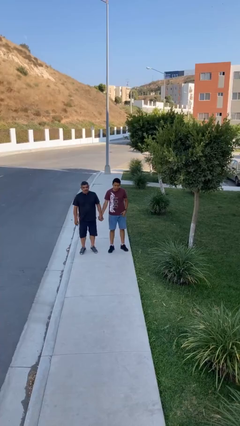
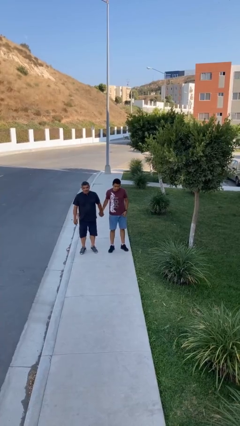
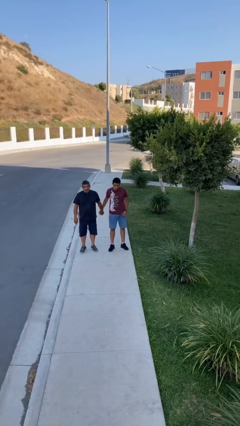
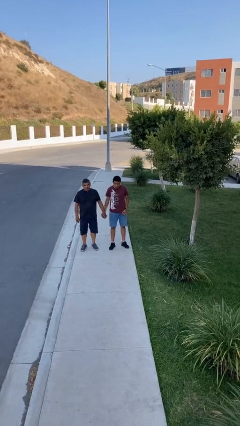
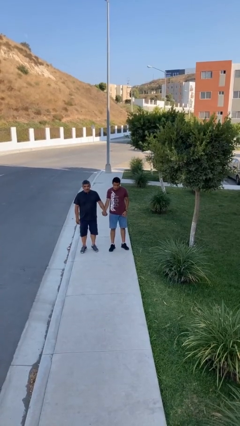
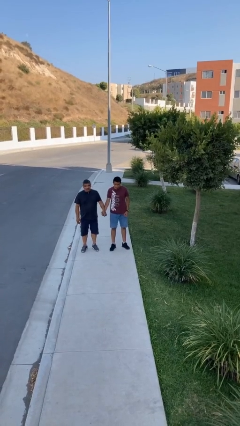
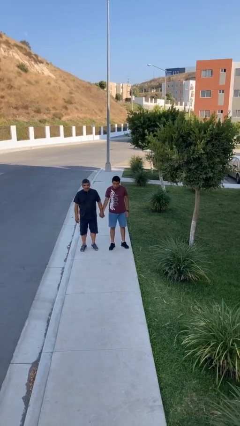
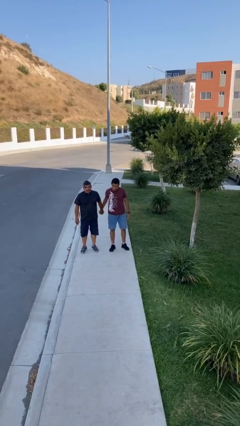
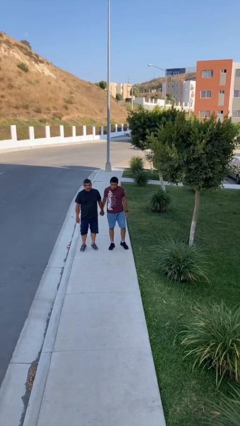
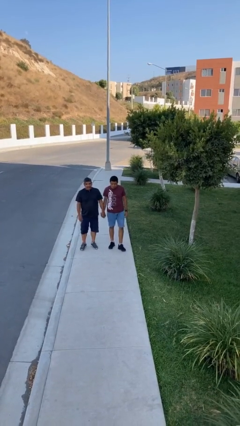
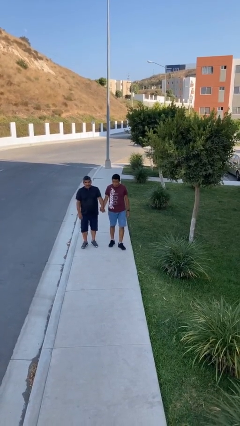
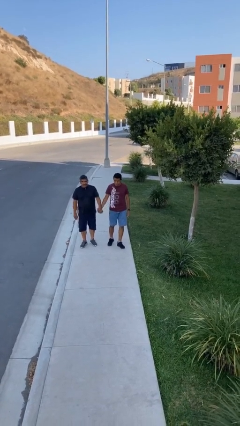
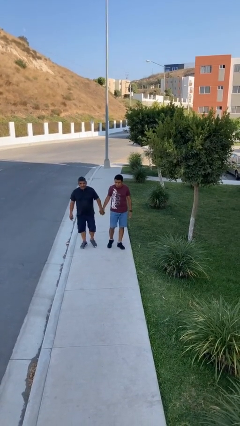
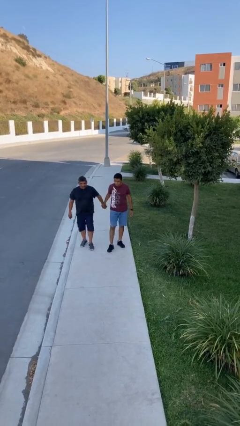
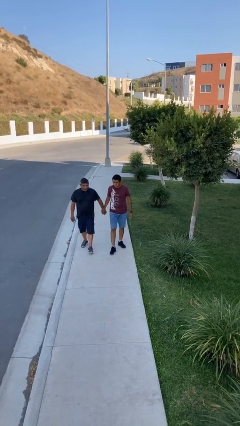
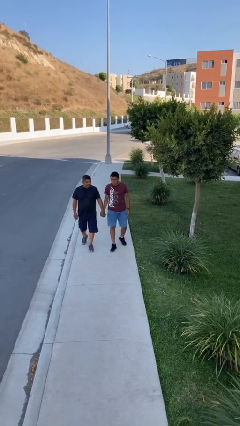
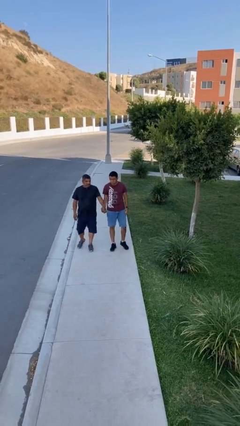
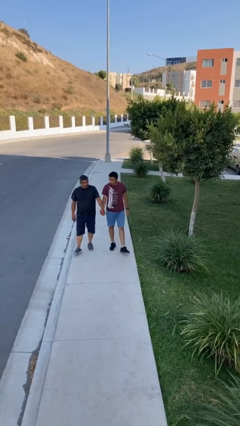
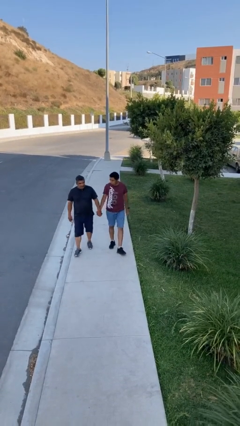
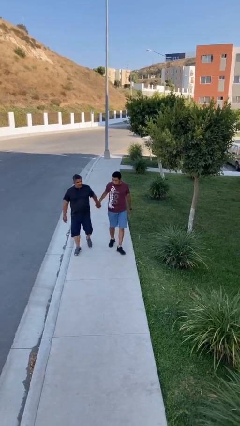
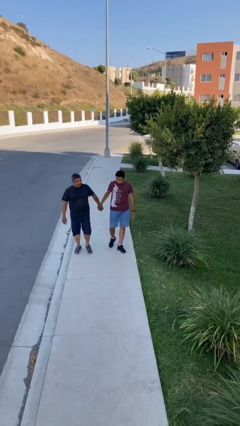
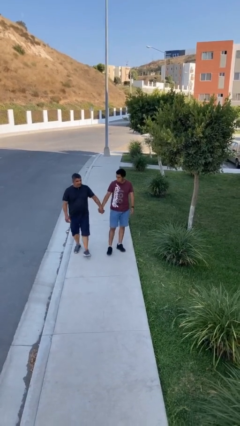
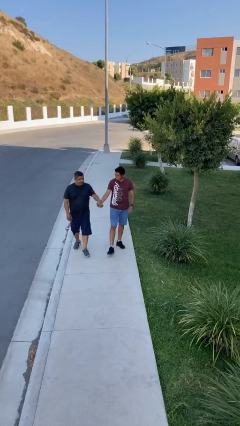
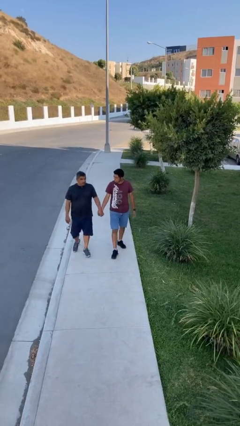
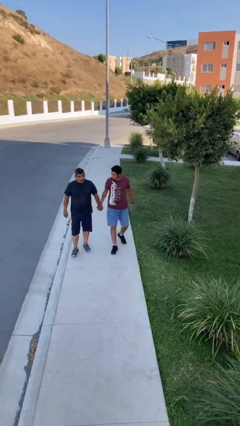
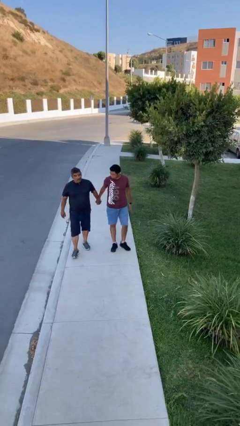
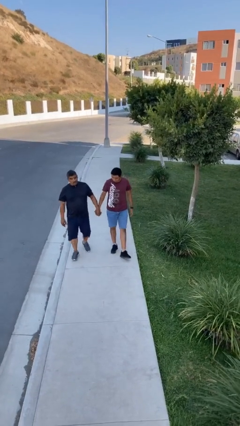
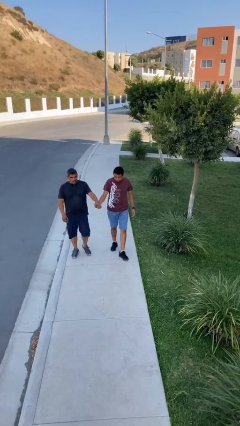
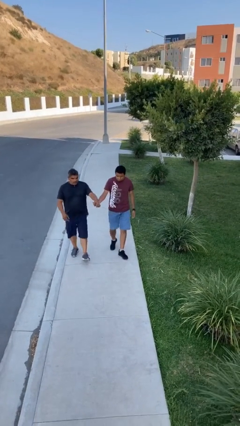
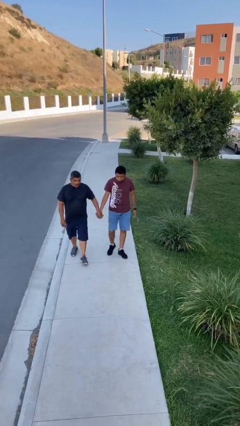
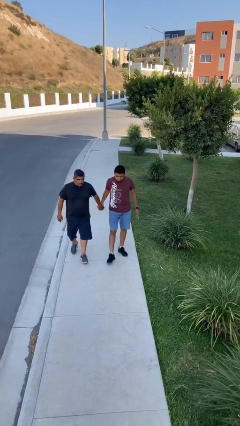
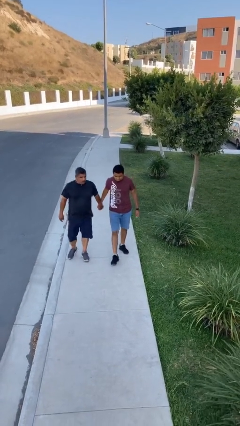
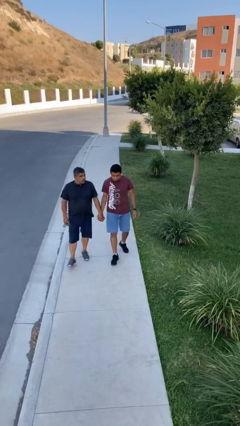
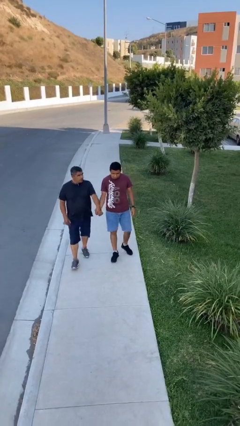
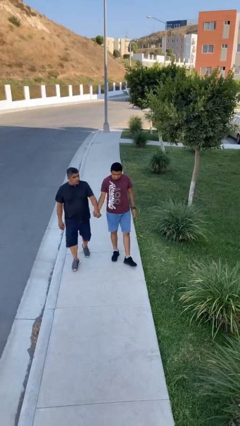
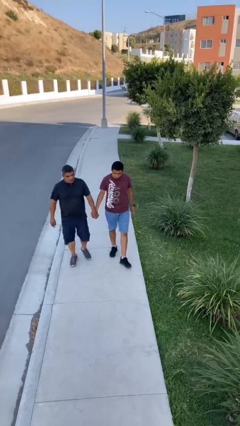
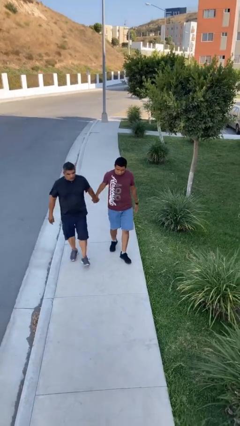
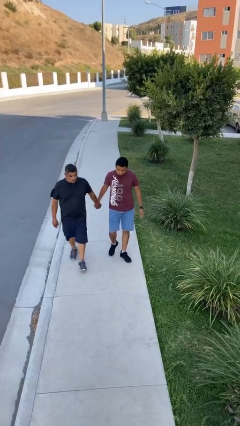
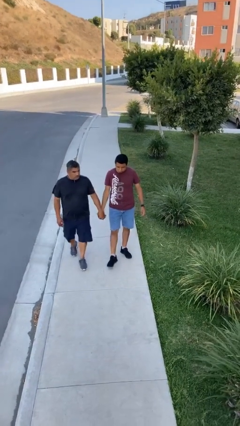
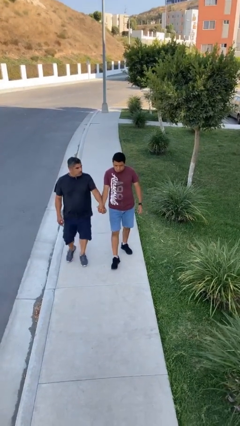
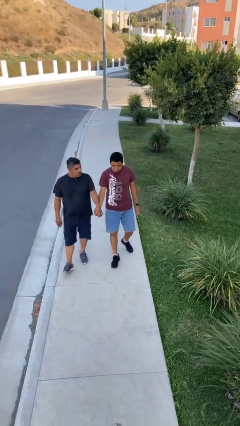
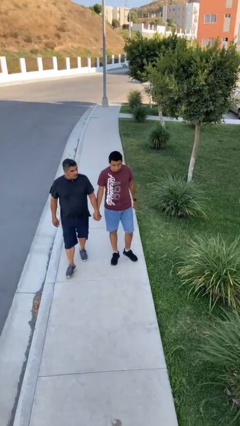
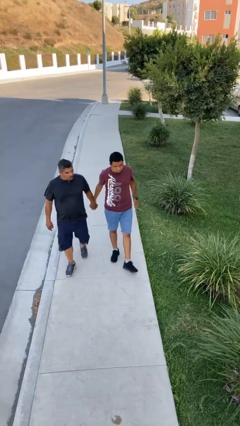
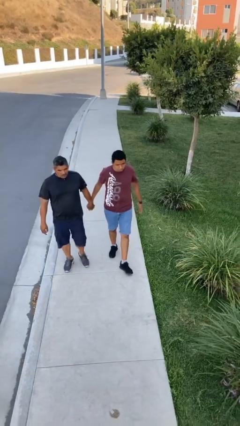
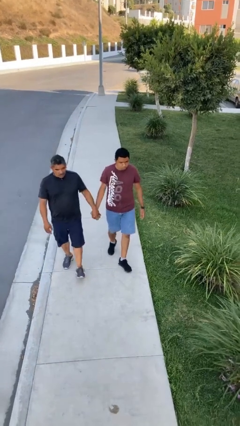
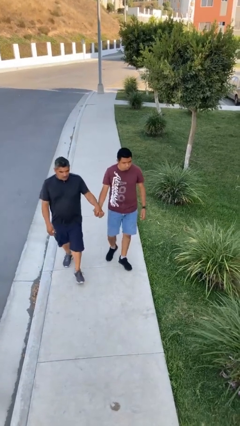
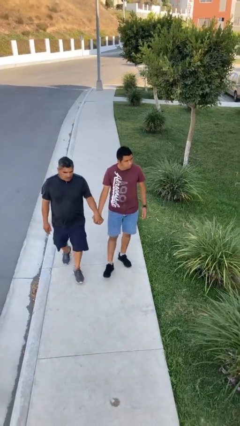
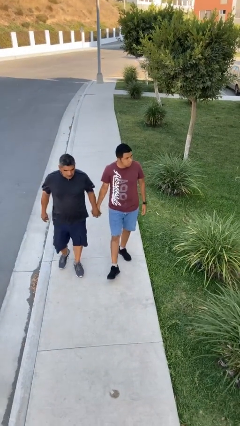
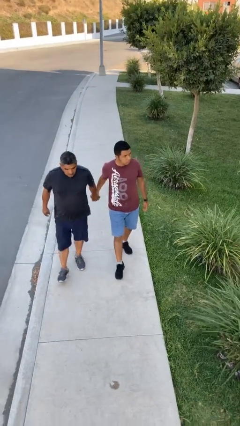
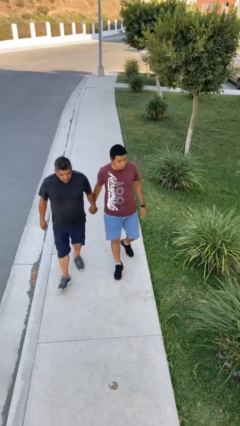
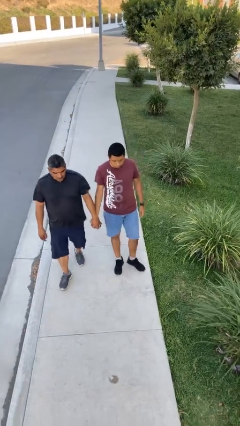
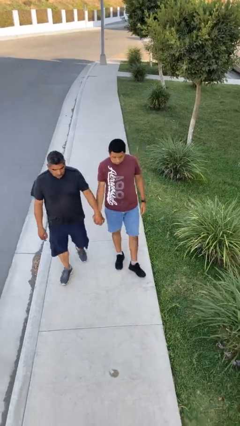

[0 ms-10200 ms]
person holds hand

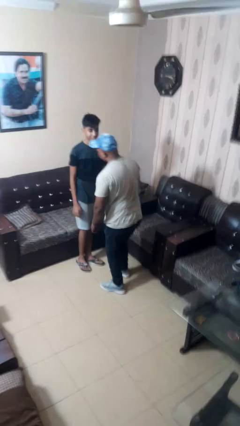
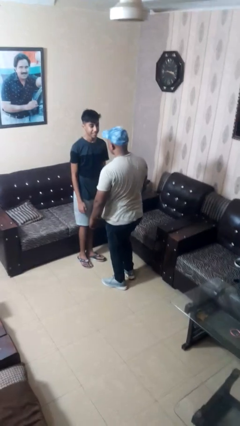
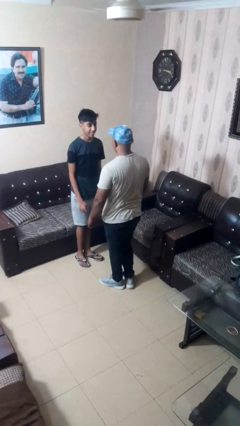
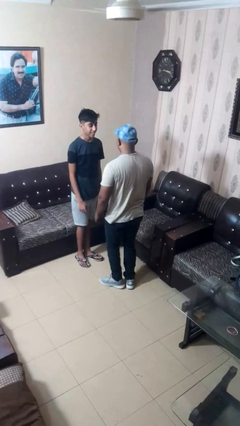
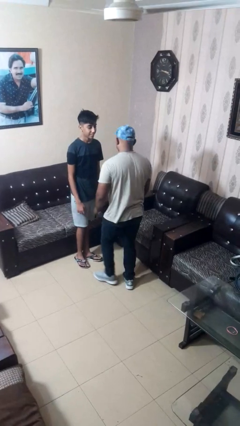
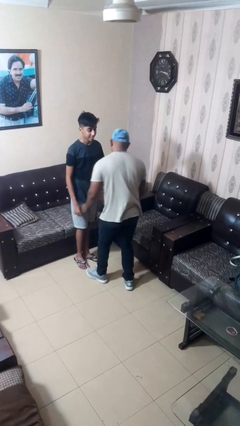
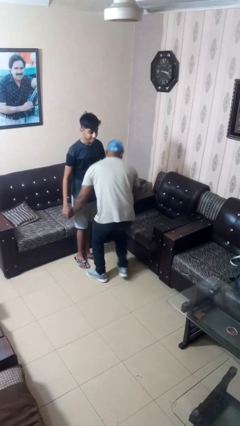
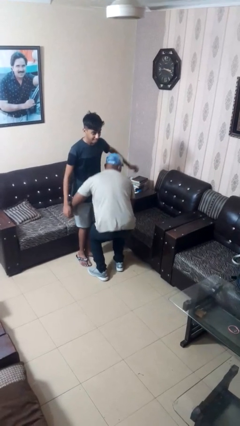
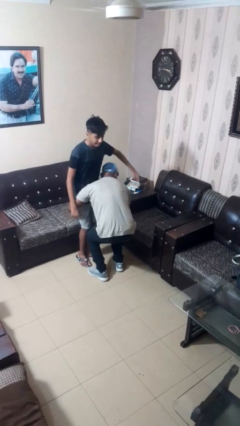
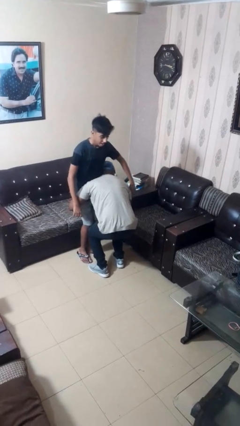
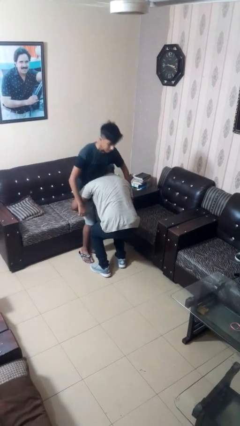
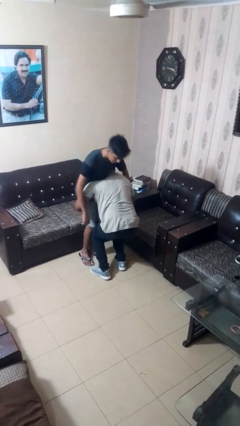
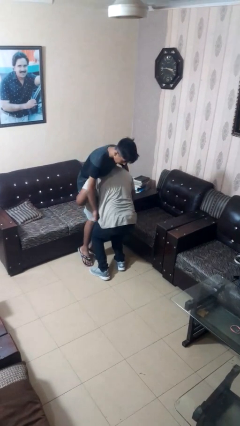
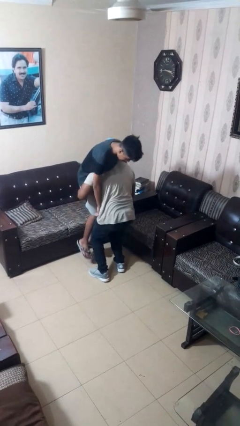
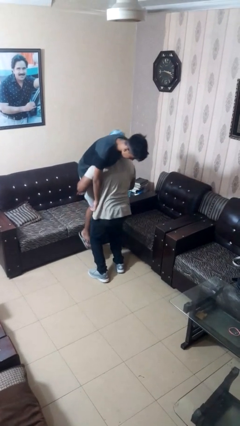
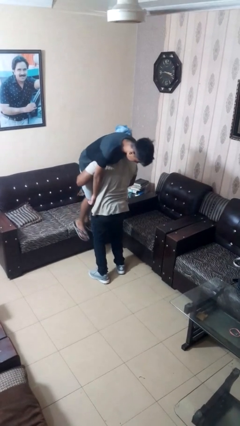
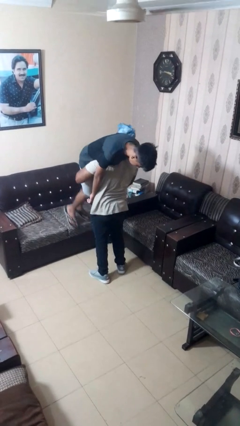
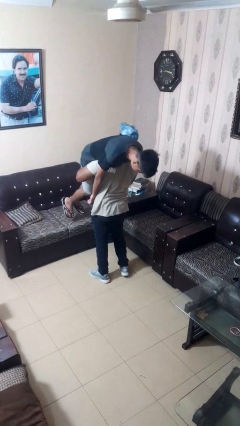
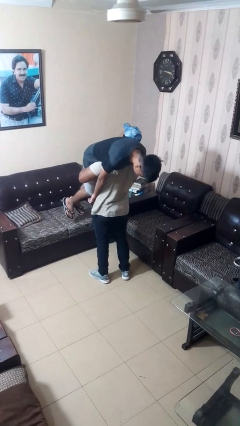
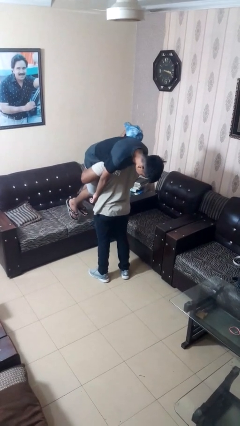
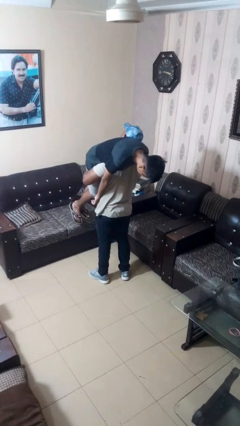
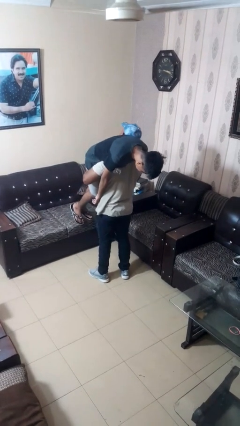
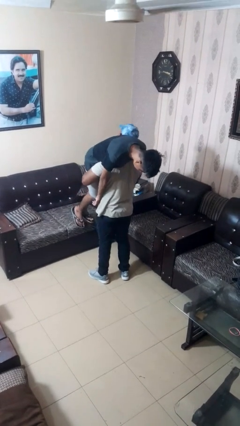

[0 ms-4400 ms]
person picks up person

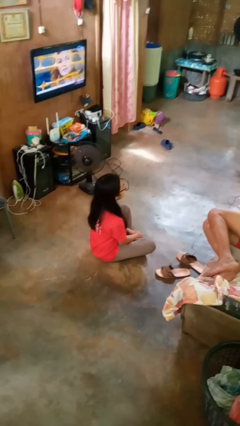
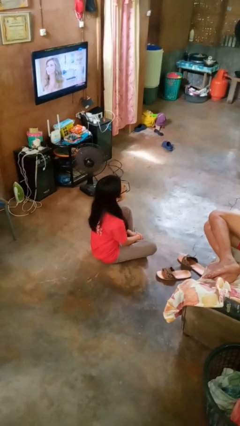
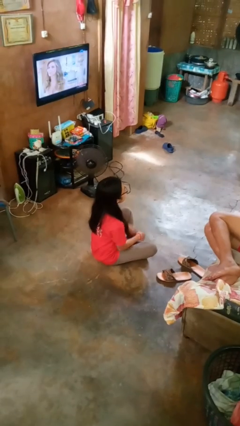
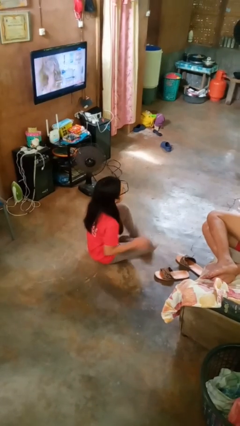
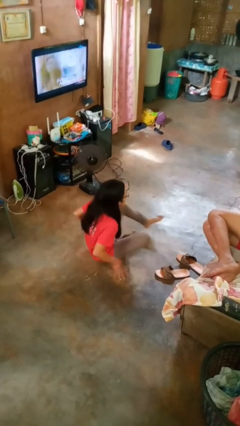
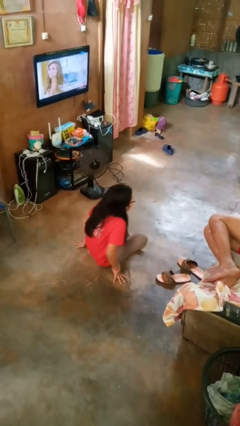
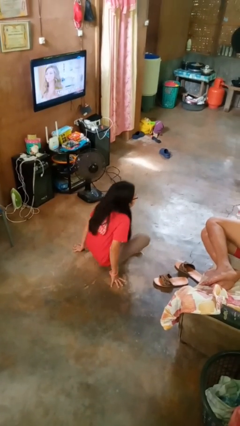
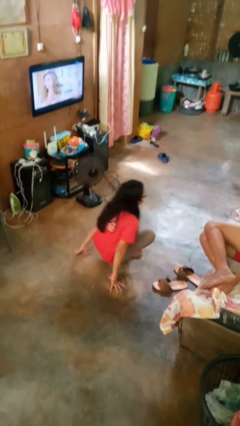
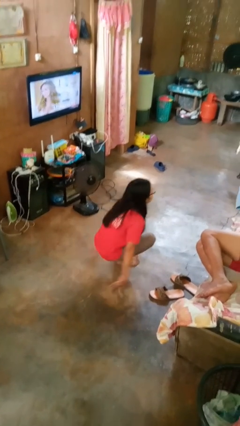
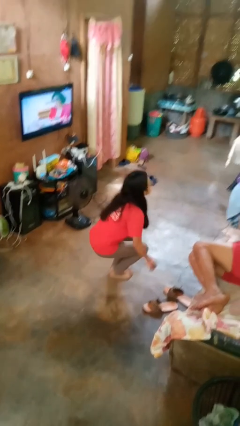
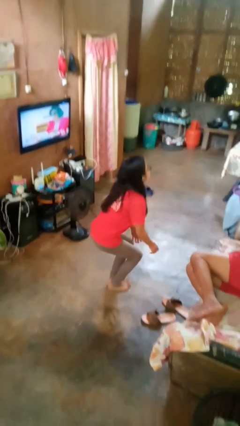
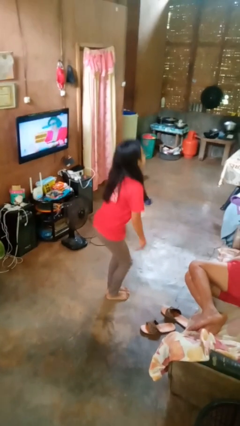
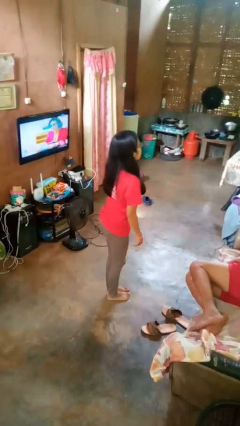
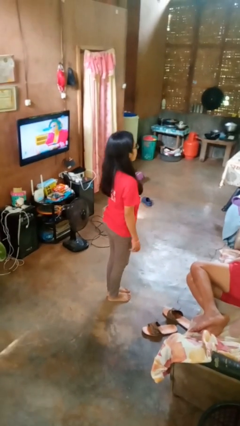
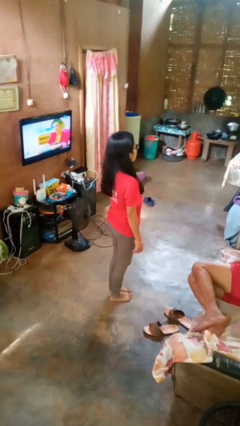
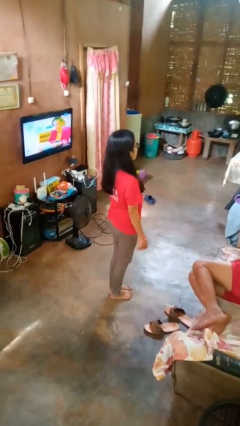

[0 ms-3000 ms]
person stands up from floor

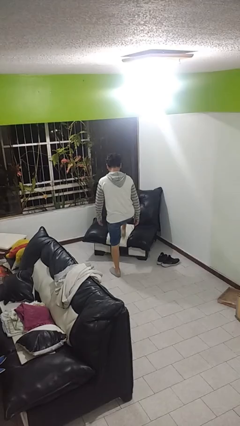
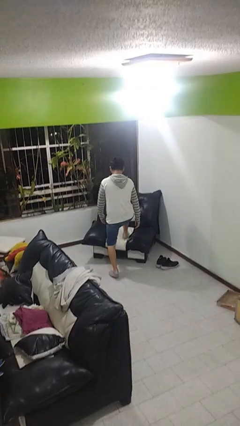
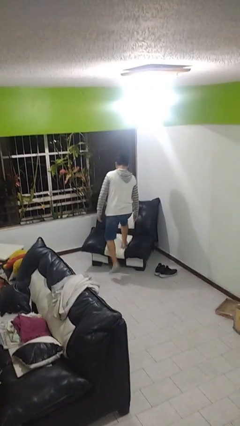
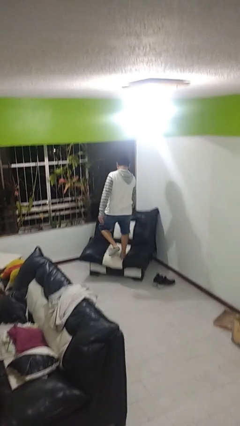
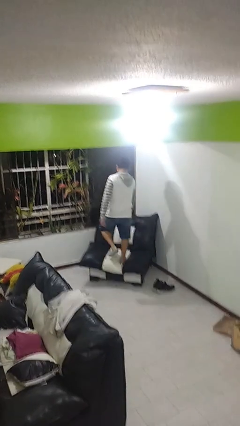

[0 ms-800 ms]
person climbs on couch
